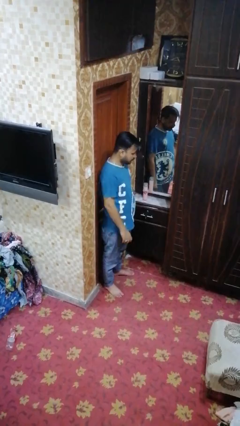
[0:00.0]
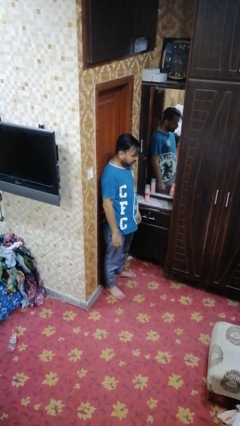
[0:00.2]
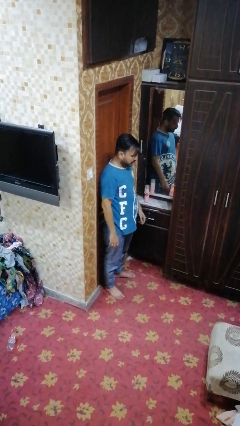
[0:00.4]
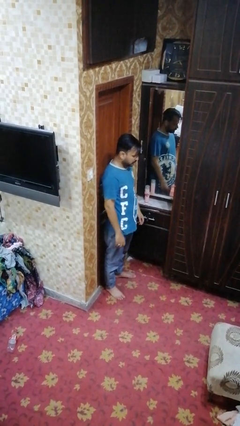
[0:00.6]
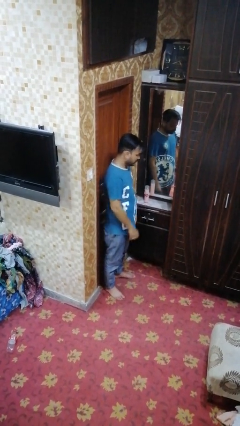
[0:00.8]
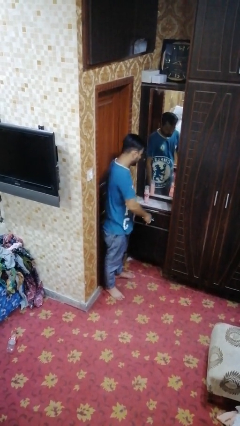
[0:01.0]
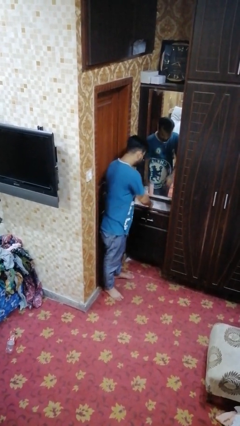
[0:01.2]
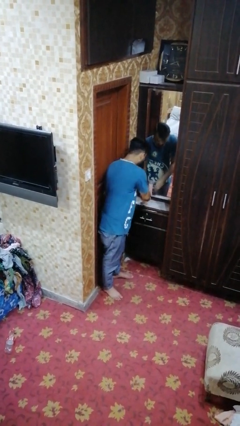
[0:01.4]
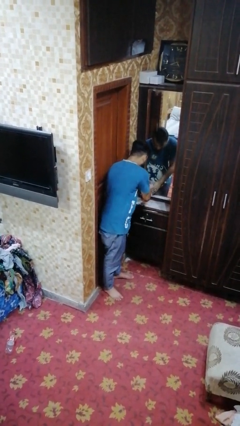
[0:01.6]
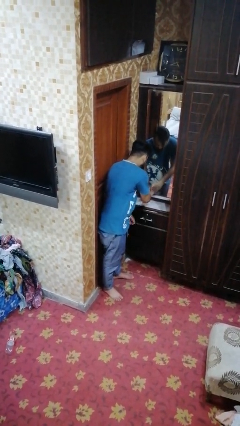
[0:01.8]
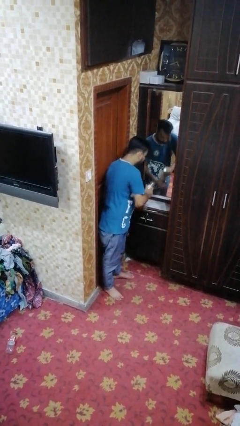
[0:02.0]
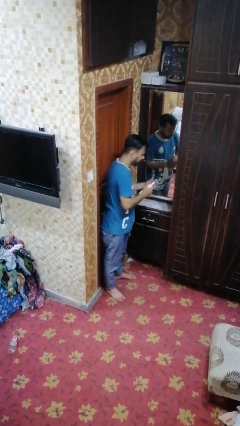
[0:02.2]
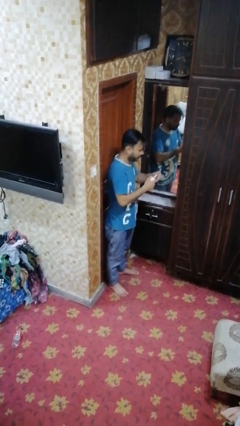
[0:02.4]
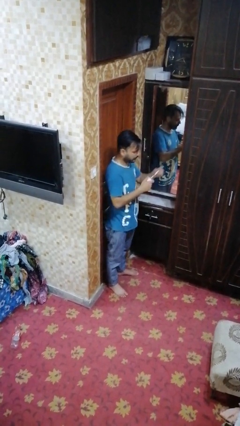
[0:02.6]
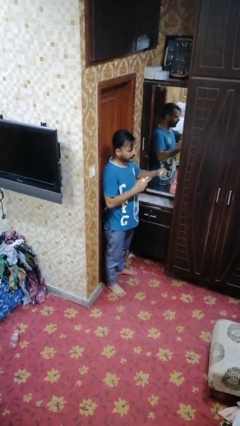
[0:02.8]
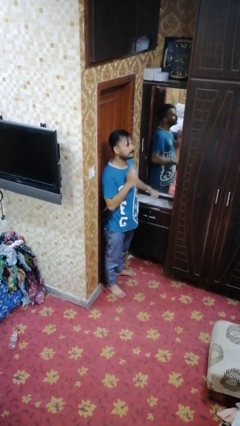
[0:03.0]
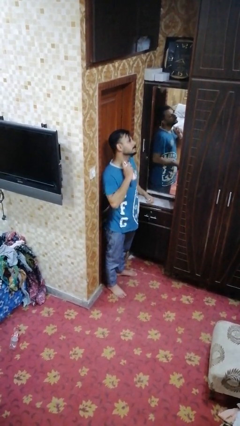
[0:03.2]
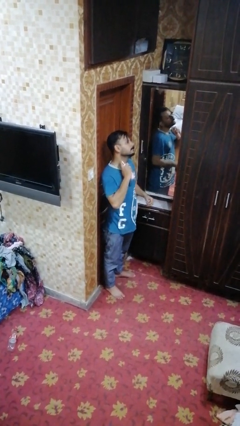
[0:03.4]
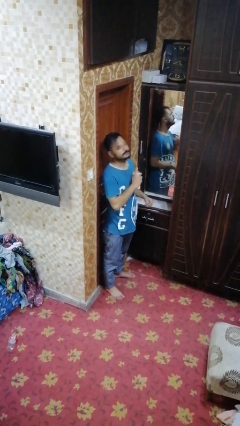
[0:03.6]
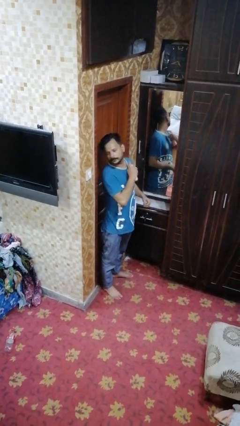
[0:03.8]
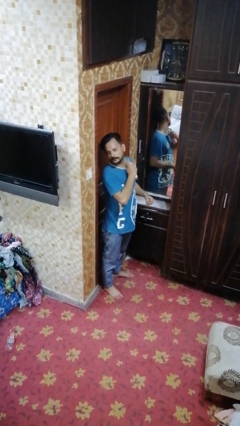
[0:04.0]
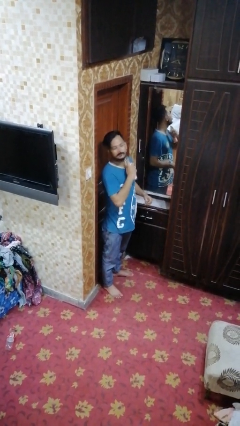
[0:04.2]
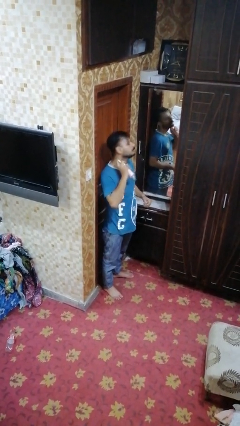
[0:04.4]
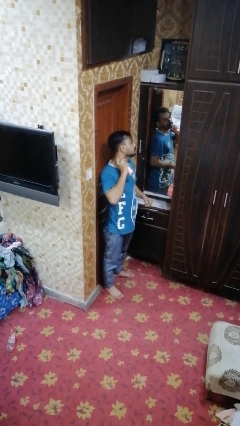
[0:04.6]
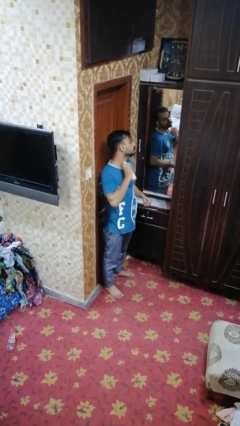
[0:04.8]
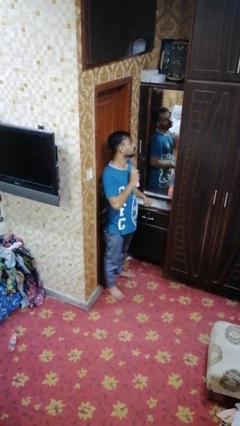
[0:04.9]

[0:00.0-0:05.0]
person sprays from bottle

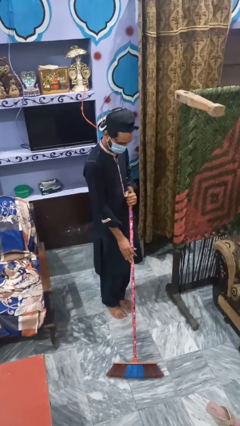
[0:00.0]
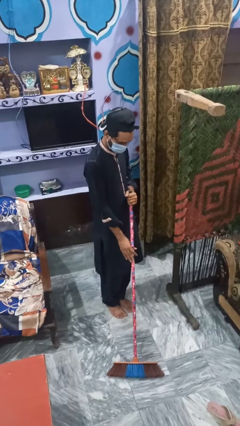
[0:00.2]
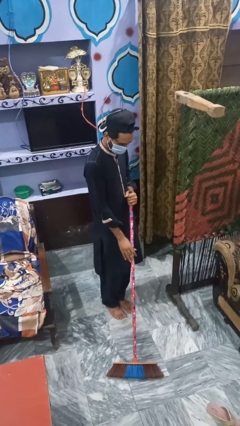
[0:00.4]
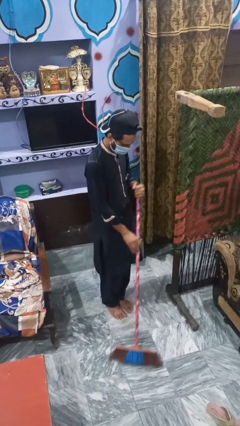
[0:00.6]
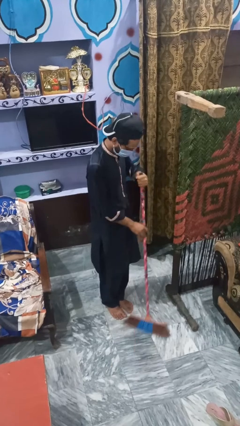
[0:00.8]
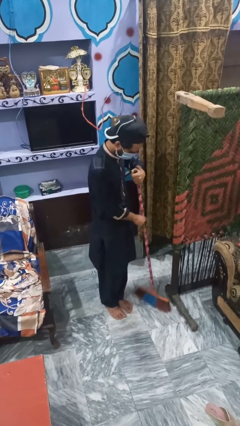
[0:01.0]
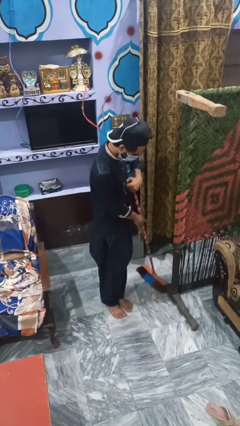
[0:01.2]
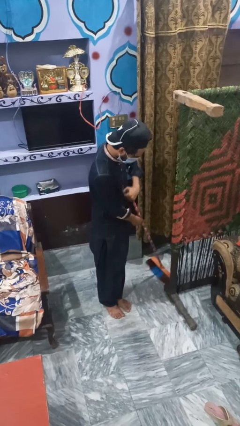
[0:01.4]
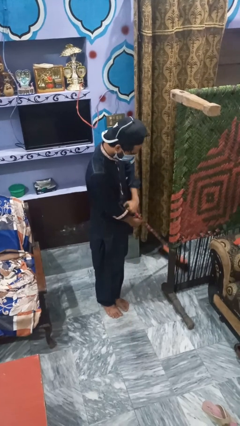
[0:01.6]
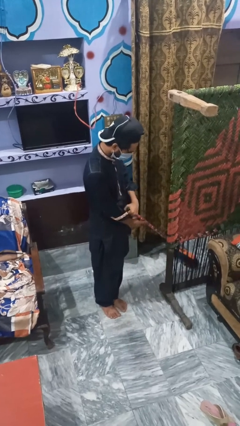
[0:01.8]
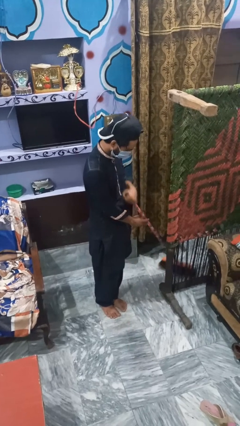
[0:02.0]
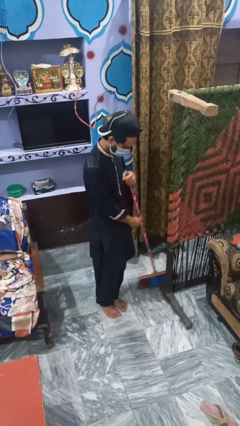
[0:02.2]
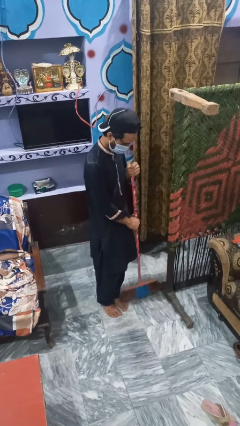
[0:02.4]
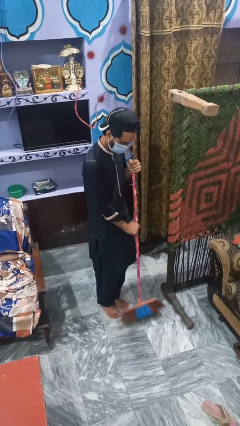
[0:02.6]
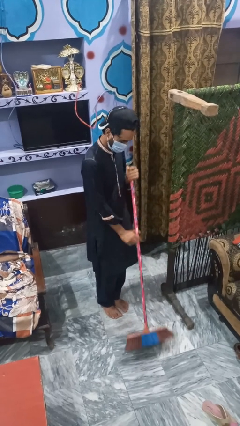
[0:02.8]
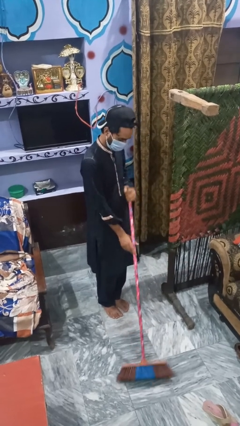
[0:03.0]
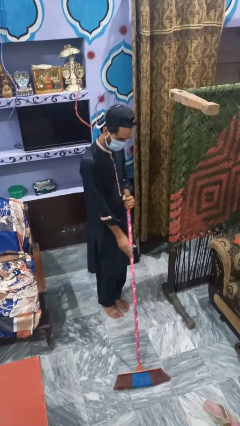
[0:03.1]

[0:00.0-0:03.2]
person mops

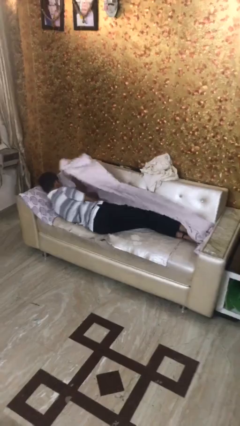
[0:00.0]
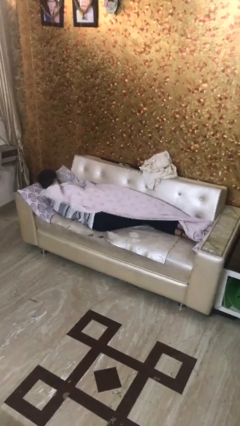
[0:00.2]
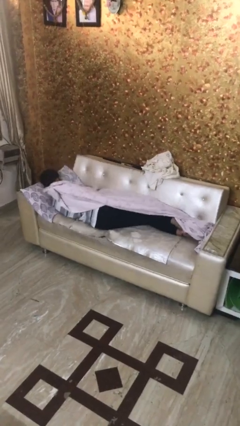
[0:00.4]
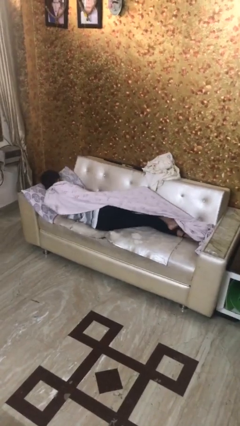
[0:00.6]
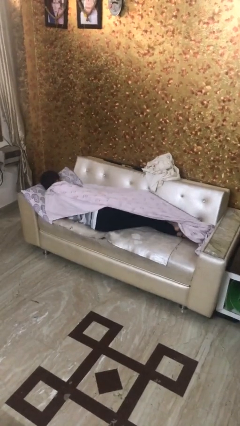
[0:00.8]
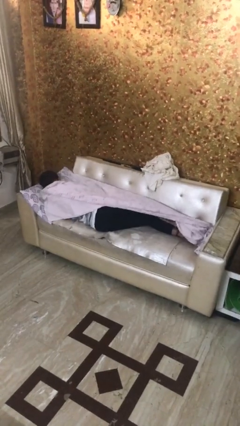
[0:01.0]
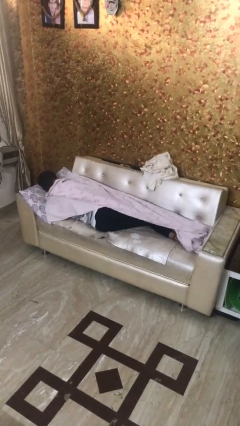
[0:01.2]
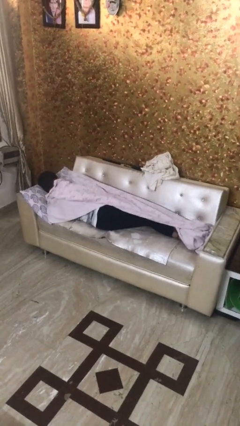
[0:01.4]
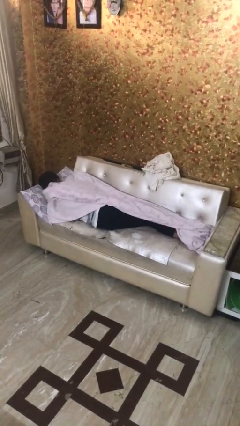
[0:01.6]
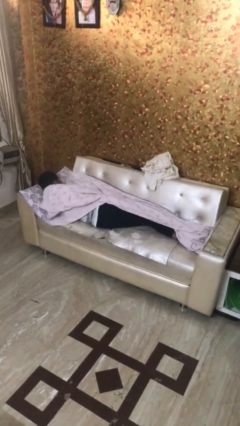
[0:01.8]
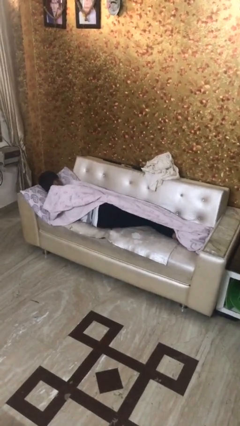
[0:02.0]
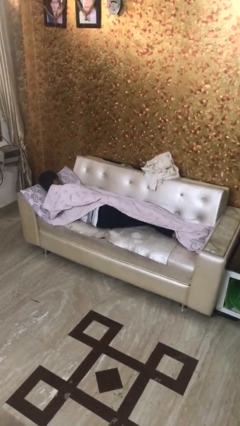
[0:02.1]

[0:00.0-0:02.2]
person covers with bedsheets

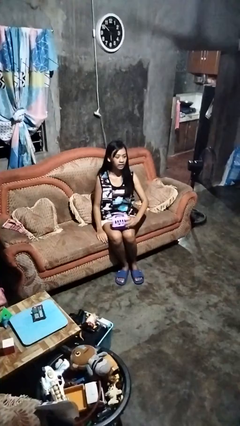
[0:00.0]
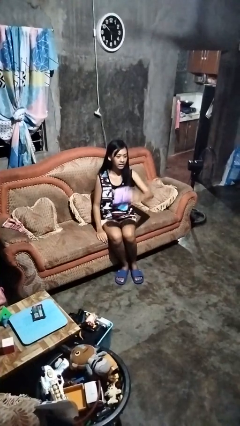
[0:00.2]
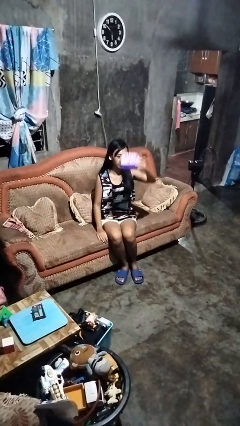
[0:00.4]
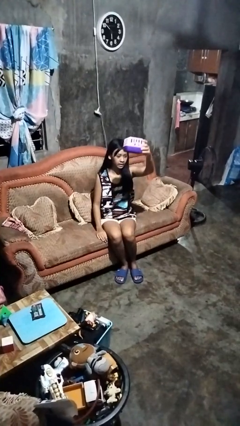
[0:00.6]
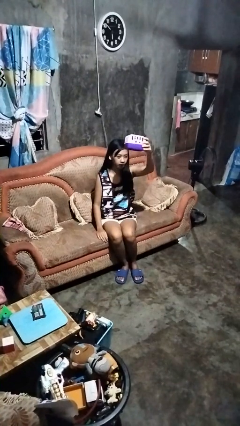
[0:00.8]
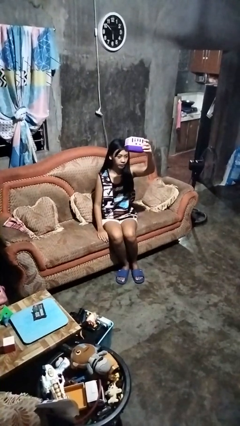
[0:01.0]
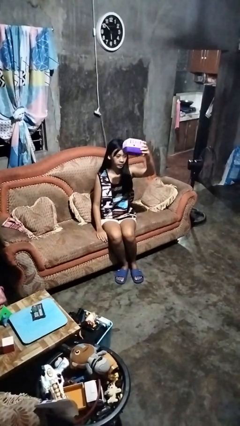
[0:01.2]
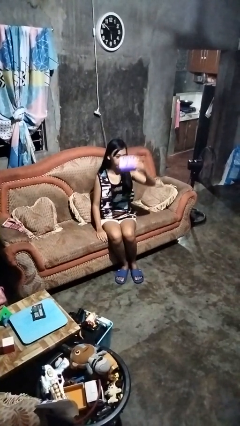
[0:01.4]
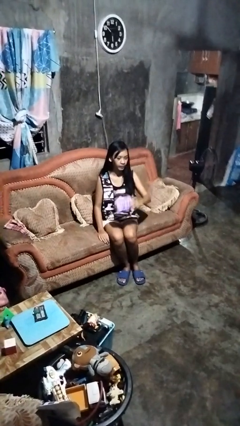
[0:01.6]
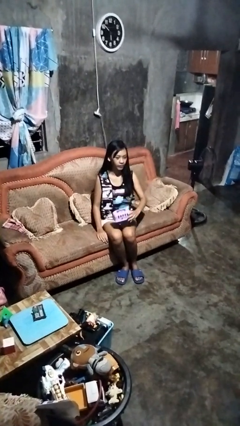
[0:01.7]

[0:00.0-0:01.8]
person holds object above head

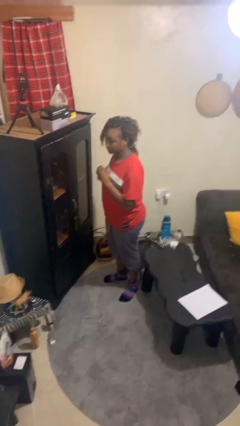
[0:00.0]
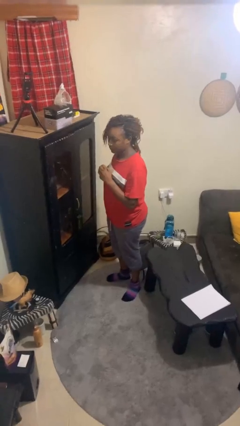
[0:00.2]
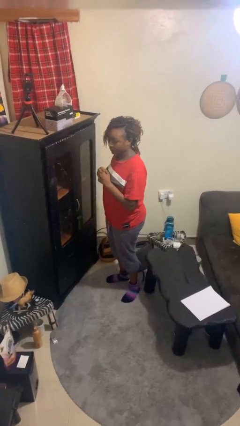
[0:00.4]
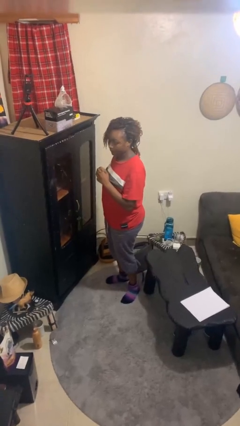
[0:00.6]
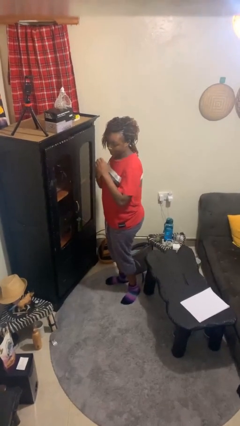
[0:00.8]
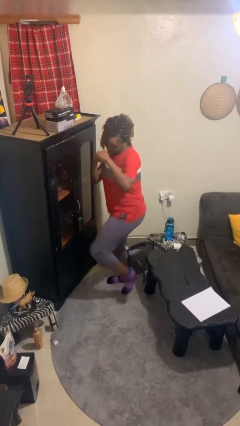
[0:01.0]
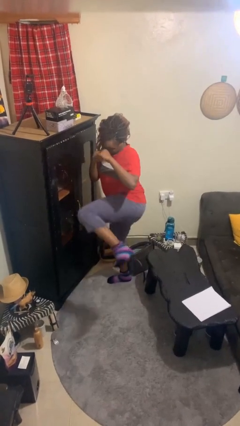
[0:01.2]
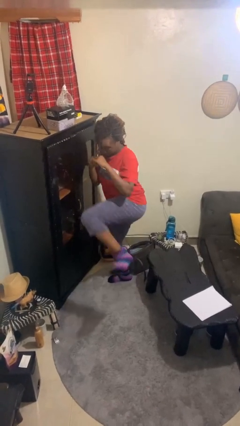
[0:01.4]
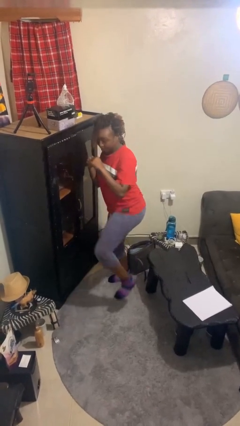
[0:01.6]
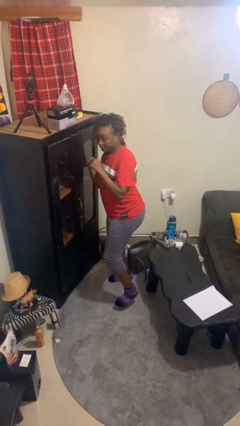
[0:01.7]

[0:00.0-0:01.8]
person karate kicks

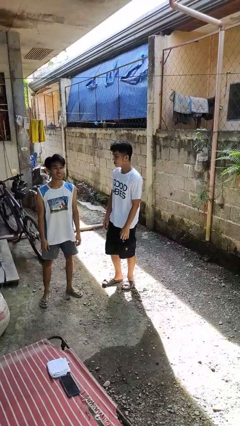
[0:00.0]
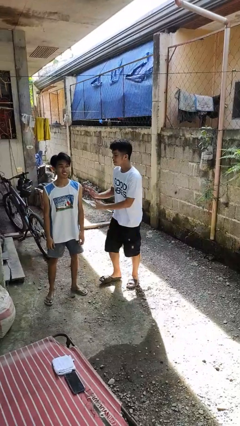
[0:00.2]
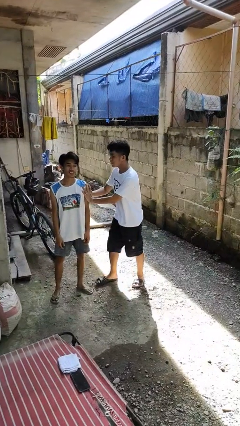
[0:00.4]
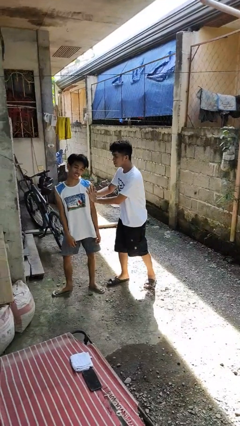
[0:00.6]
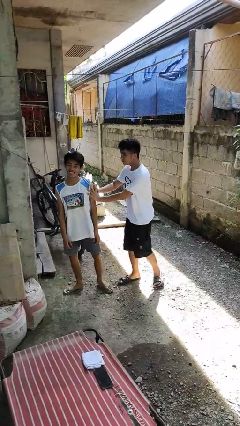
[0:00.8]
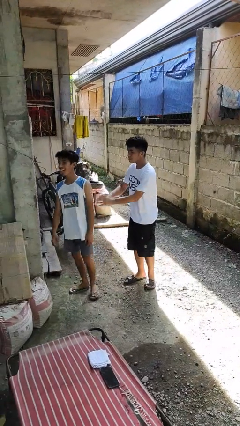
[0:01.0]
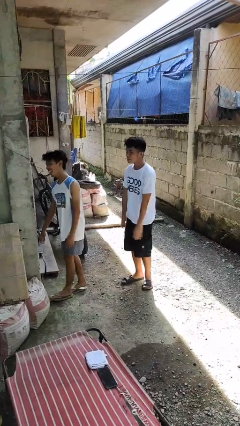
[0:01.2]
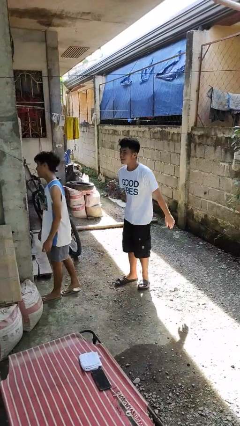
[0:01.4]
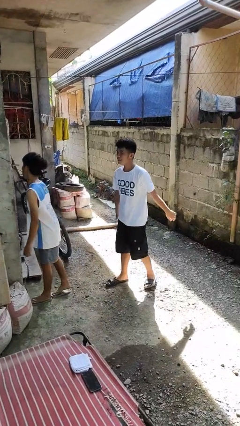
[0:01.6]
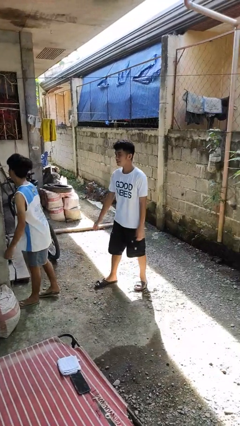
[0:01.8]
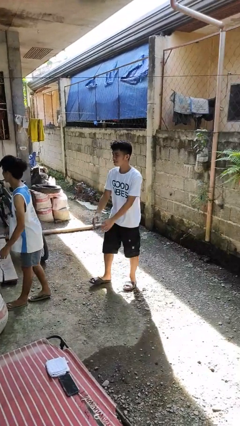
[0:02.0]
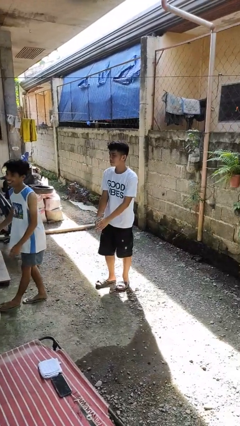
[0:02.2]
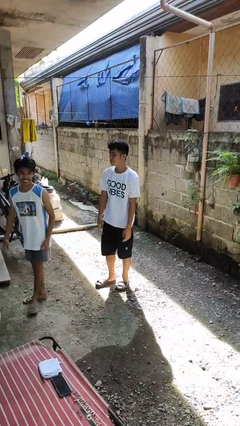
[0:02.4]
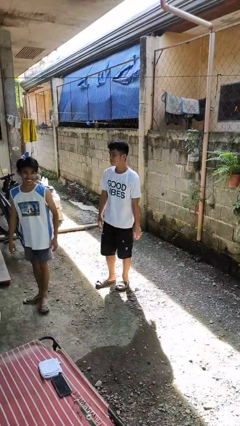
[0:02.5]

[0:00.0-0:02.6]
person shoves person

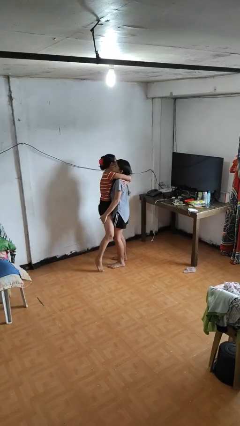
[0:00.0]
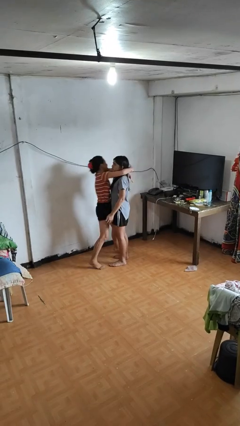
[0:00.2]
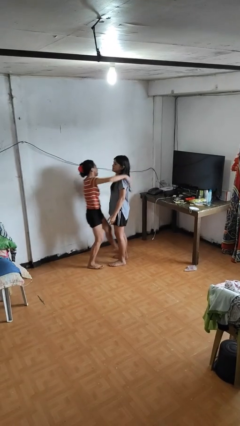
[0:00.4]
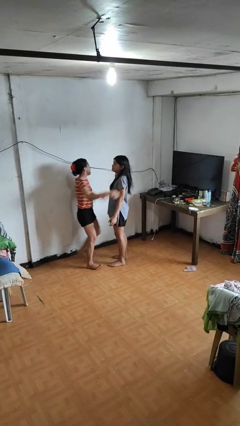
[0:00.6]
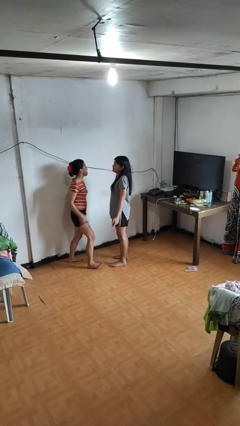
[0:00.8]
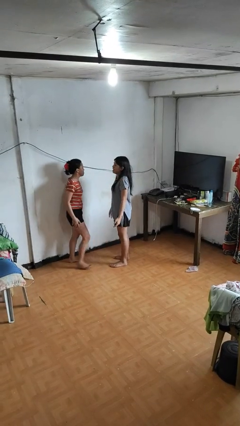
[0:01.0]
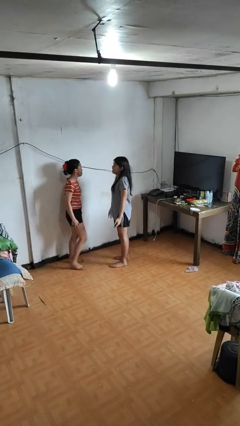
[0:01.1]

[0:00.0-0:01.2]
person puts down person
